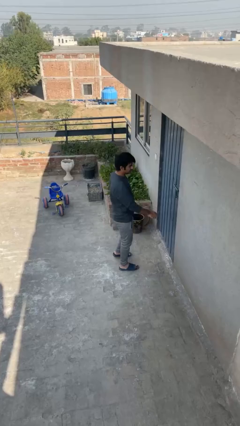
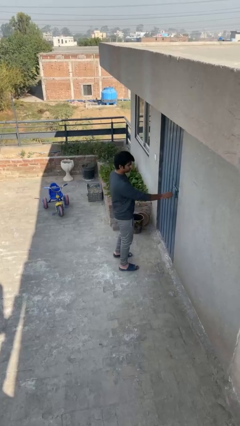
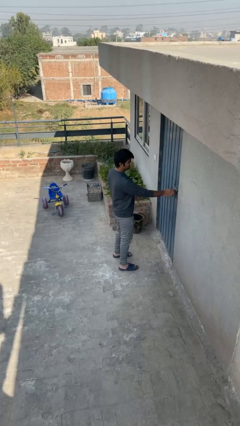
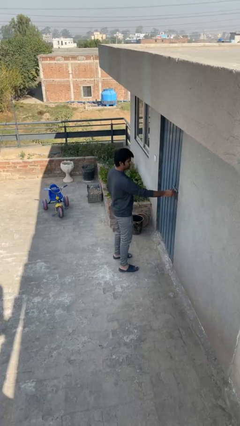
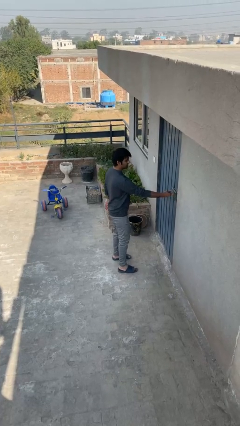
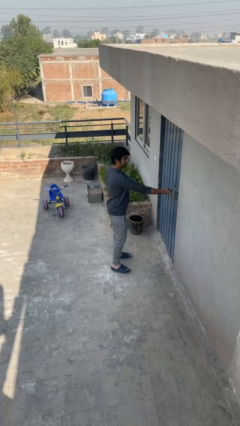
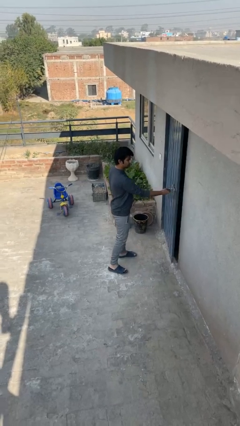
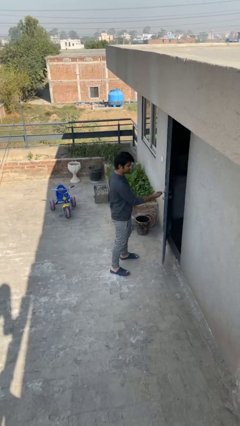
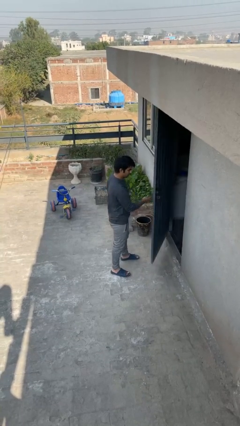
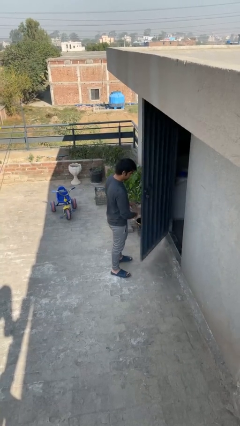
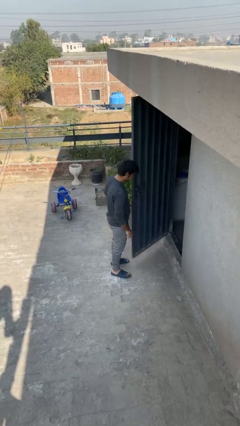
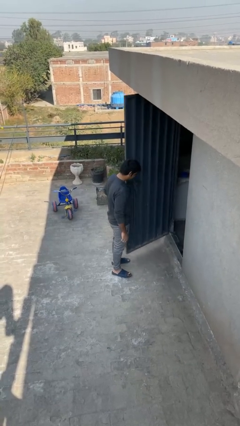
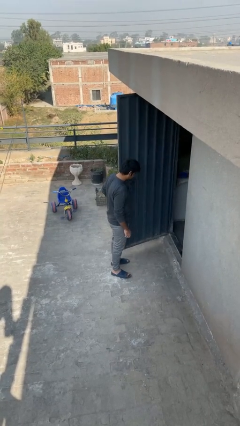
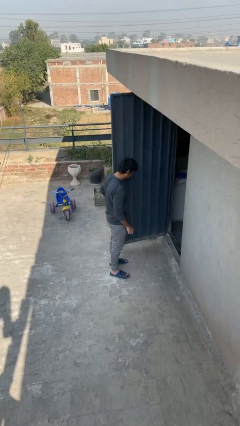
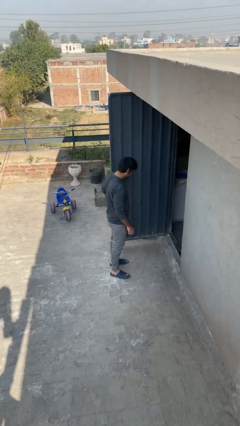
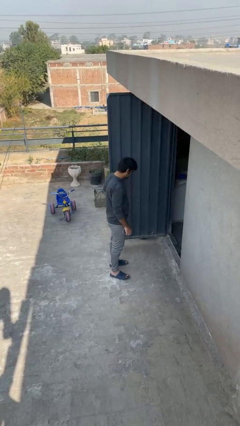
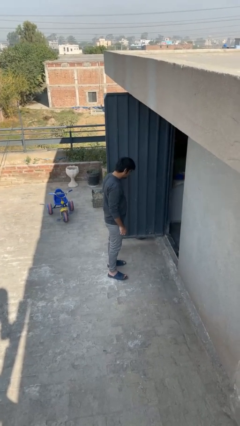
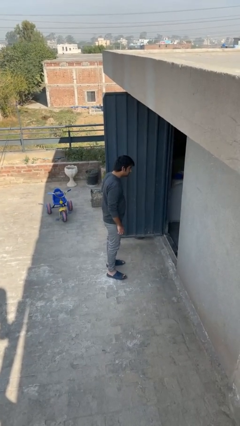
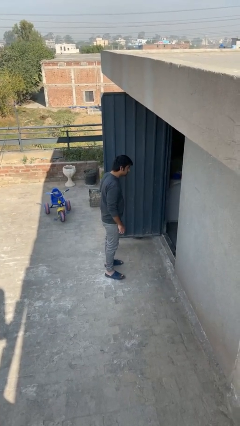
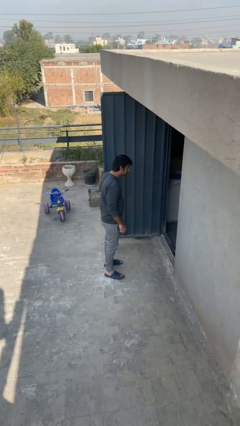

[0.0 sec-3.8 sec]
person opens facility door

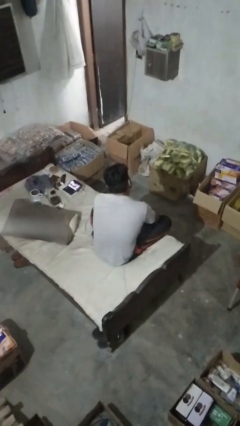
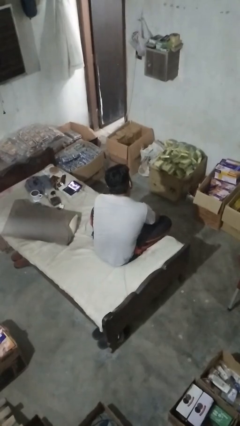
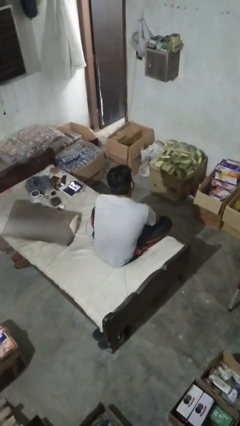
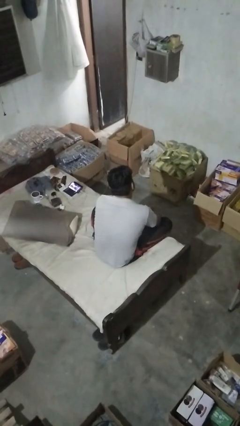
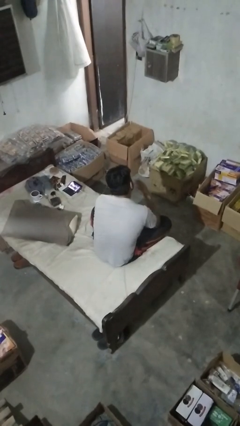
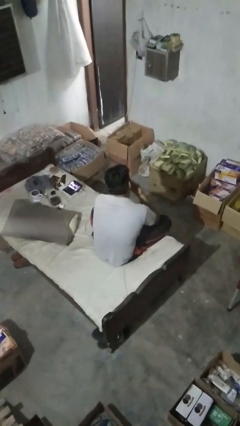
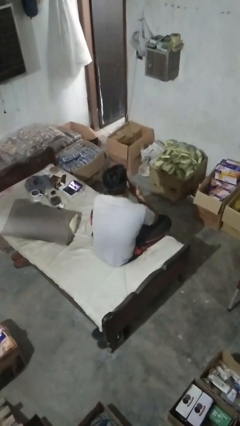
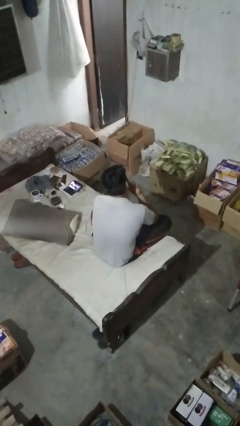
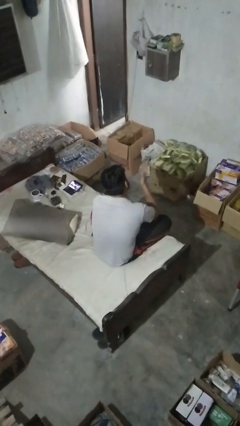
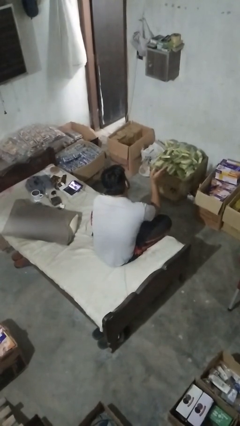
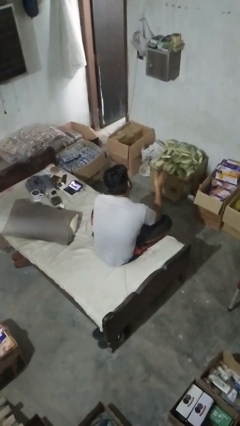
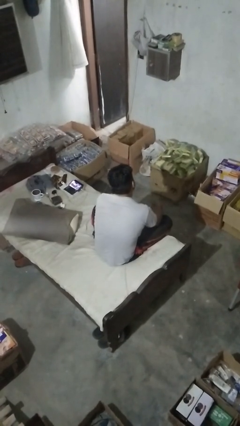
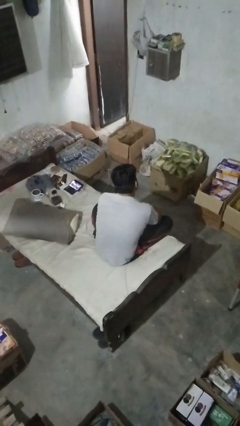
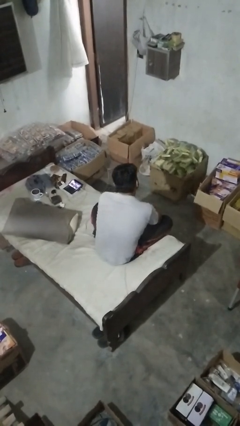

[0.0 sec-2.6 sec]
person gestures blow kiss

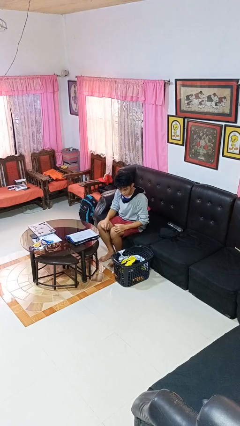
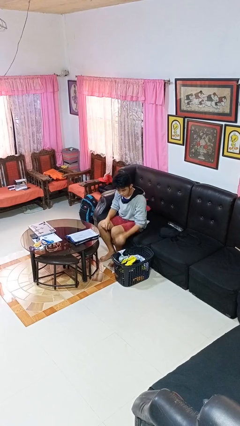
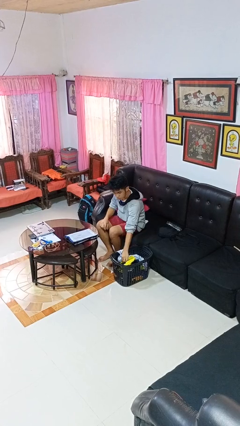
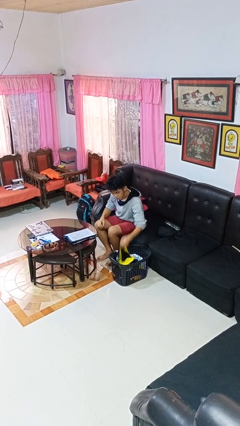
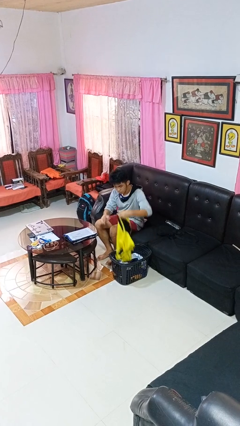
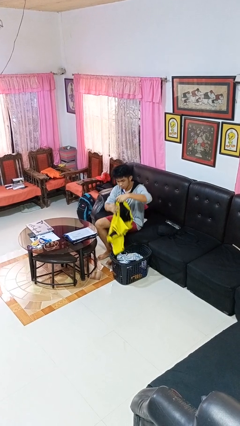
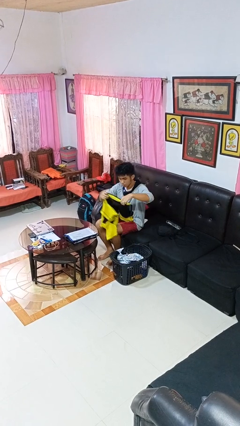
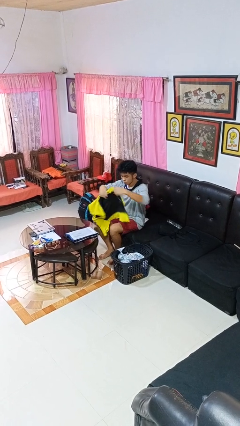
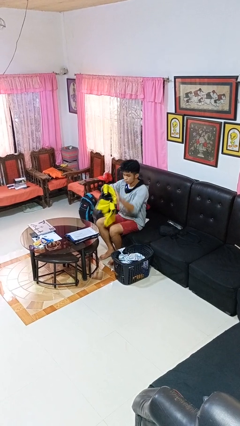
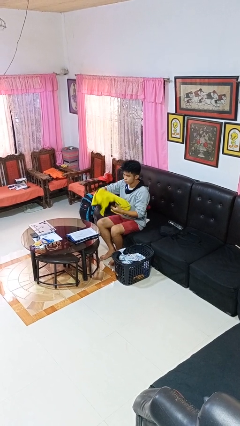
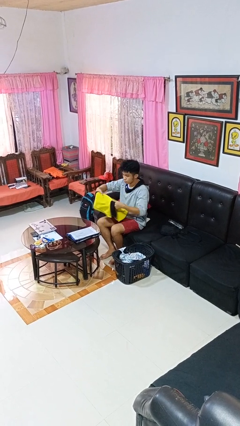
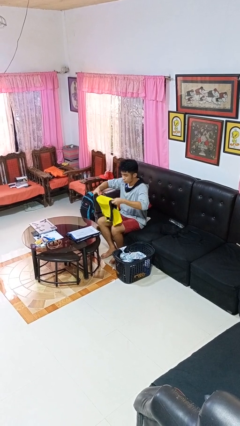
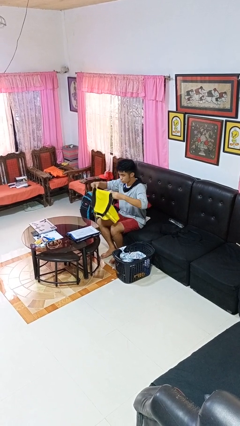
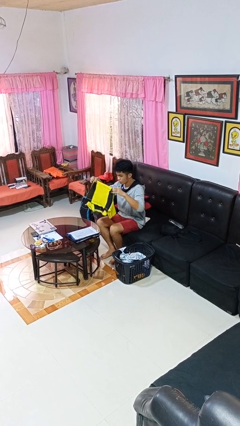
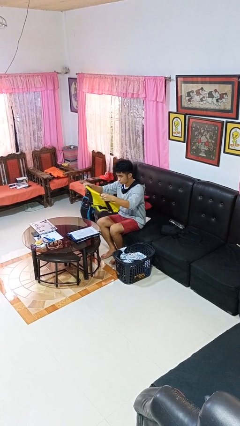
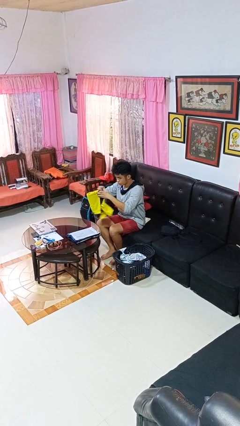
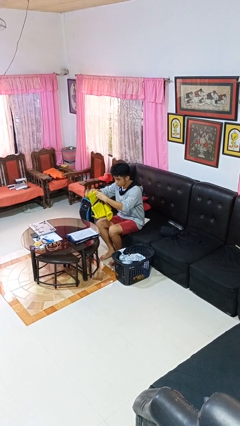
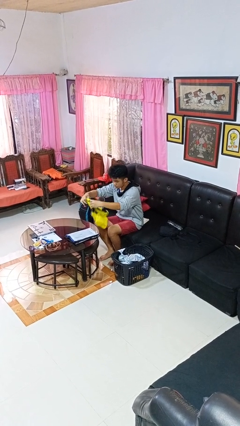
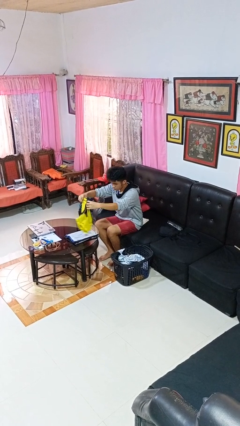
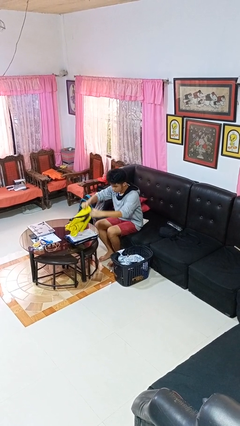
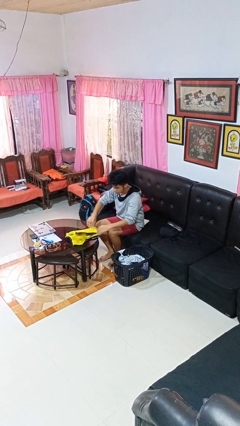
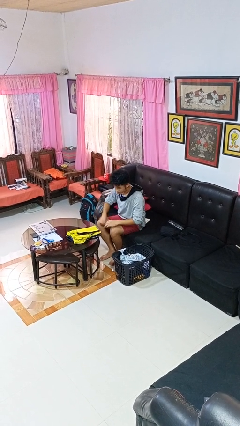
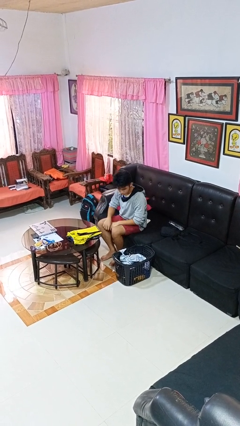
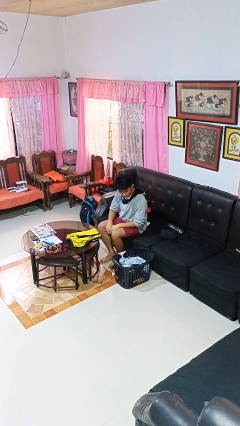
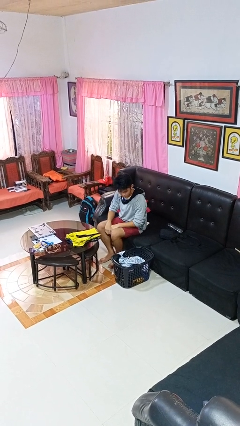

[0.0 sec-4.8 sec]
person folds shirt

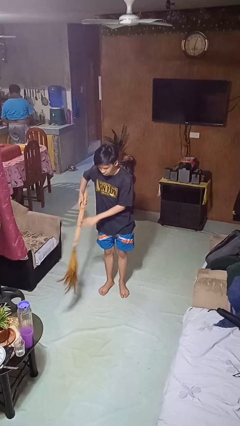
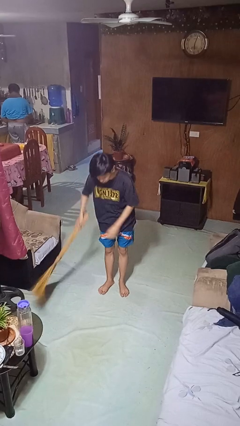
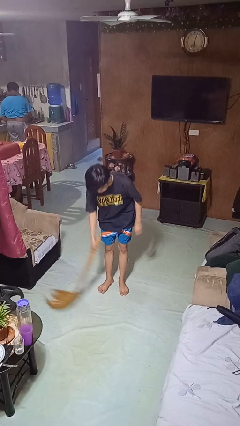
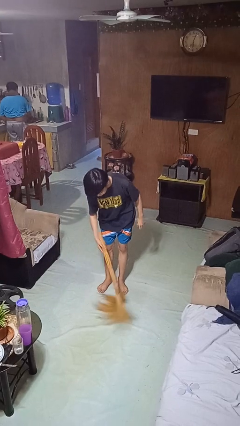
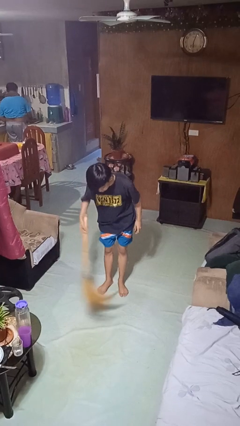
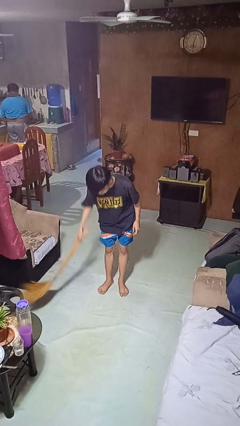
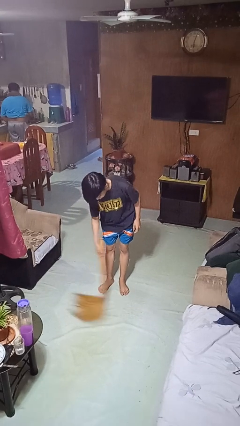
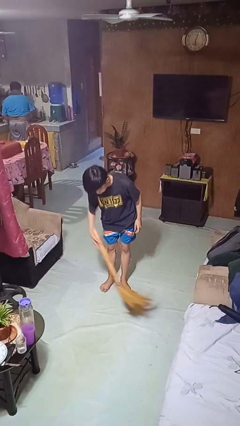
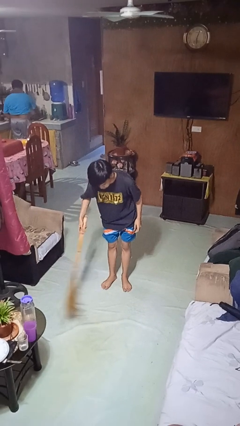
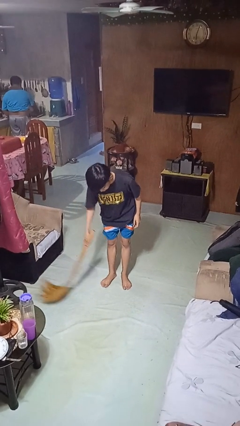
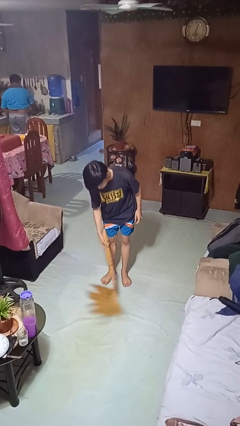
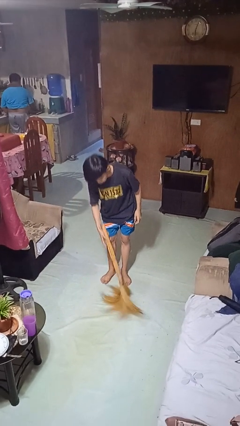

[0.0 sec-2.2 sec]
person sweeps floor

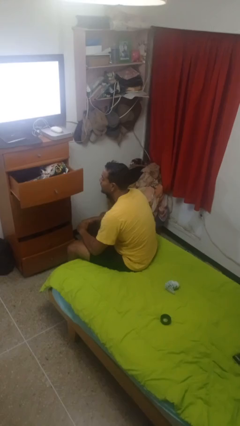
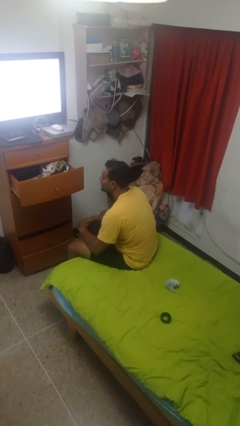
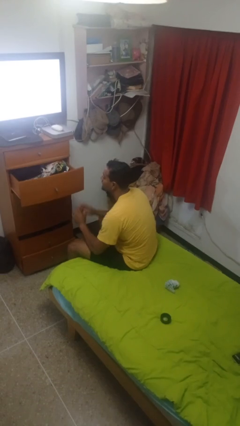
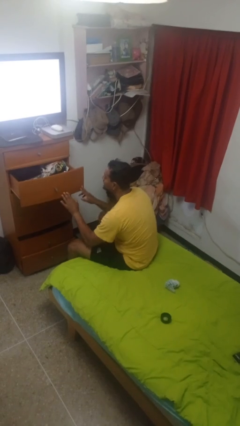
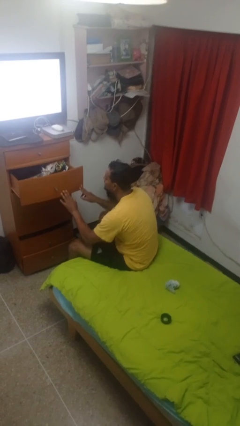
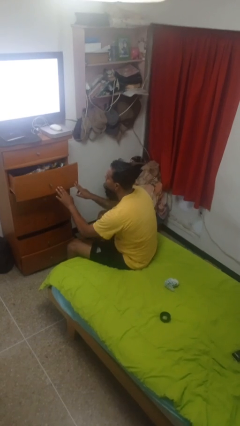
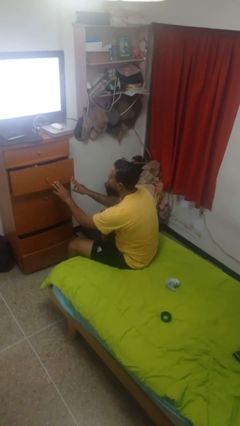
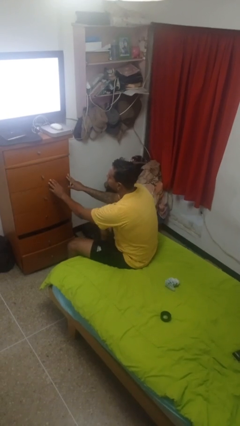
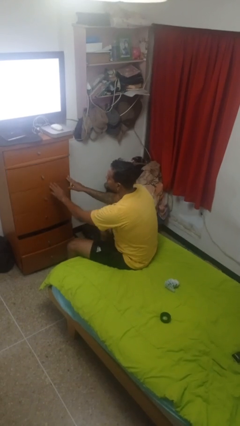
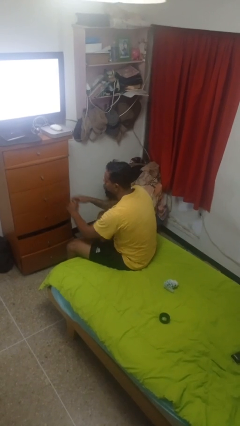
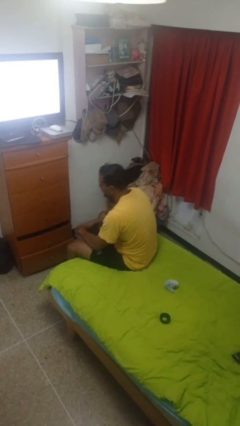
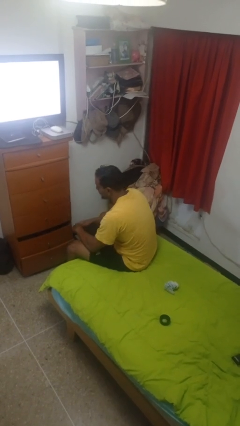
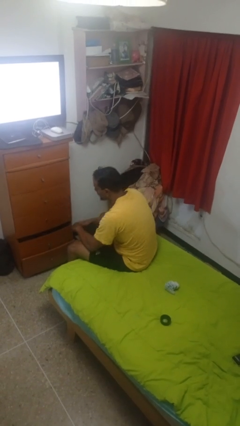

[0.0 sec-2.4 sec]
person closes dresser drawer

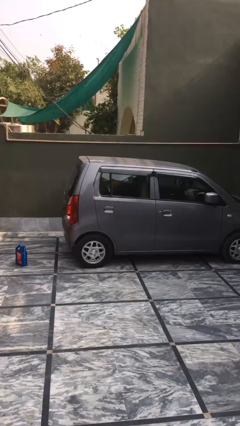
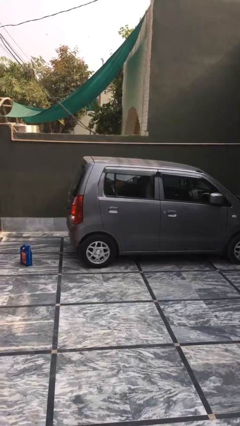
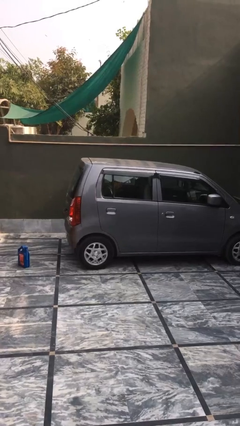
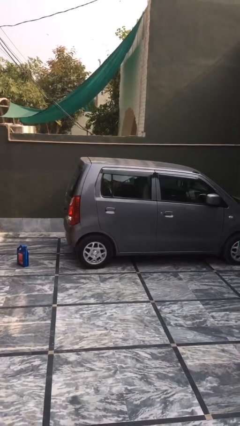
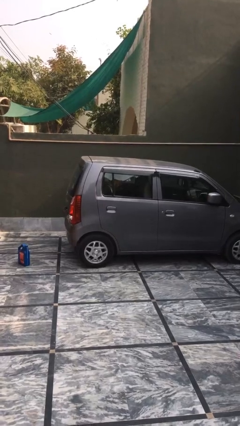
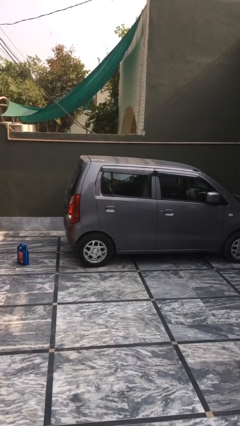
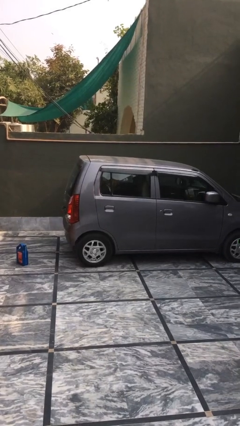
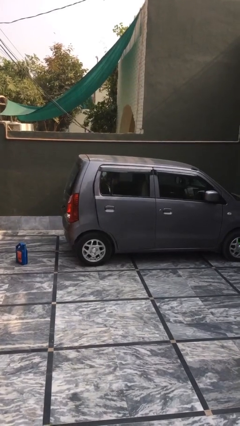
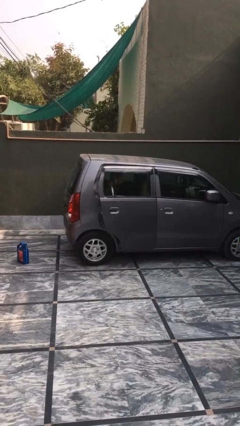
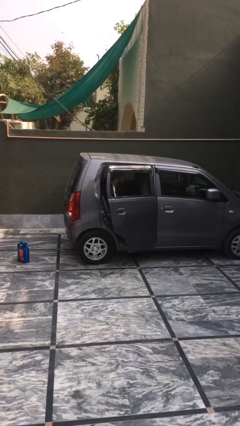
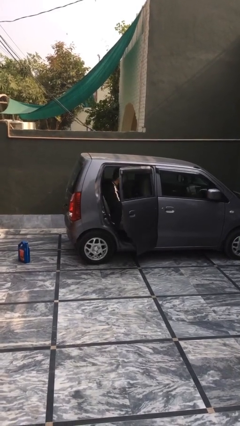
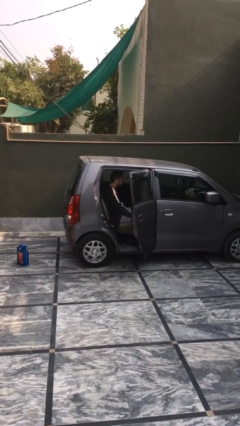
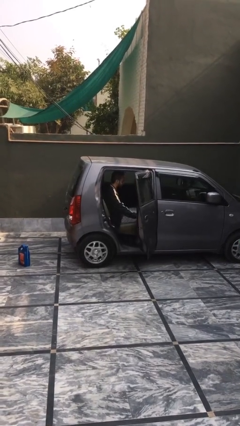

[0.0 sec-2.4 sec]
person opens car door
